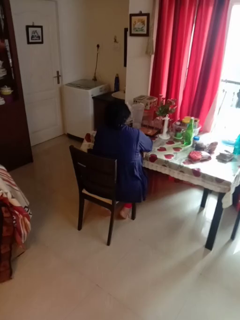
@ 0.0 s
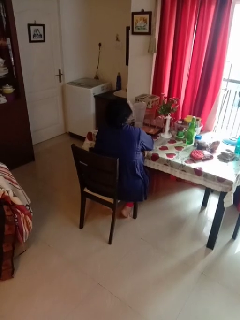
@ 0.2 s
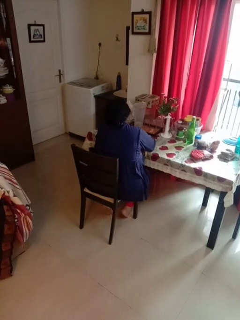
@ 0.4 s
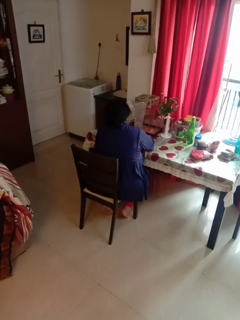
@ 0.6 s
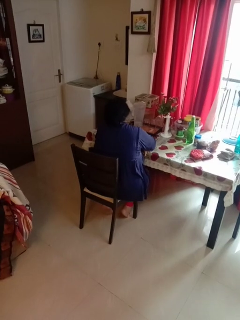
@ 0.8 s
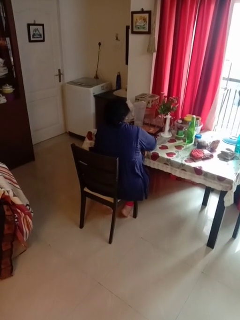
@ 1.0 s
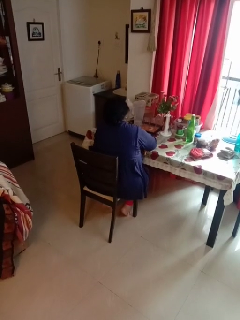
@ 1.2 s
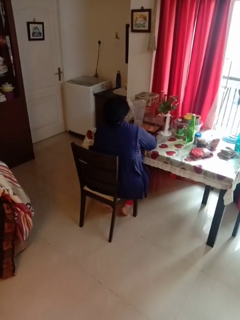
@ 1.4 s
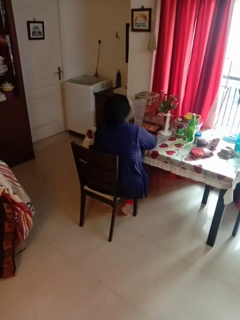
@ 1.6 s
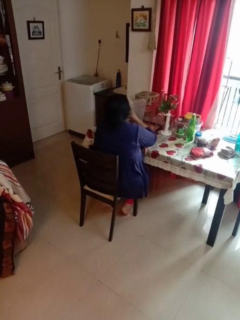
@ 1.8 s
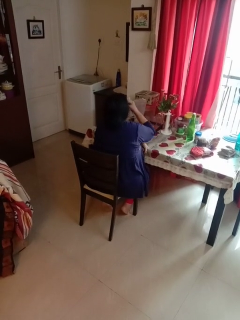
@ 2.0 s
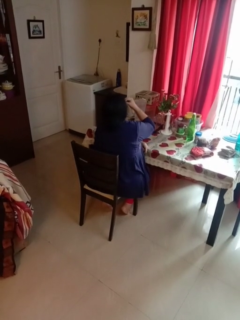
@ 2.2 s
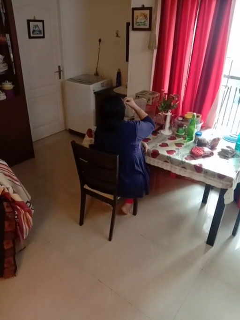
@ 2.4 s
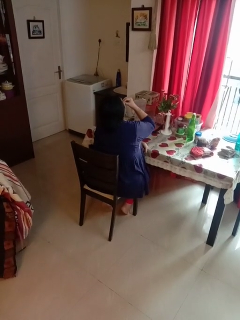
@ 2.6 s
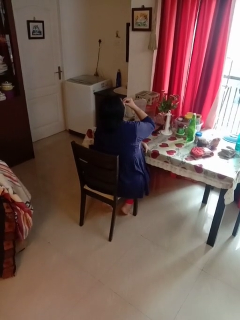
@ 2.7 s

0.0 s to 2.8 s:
person eats with hands

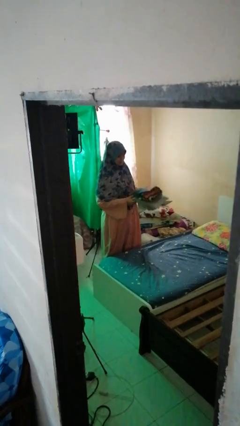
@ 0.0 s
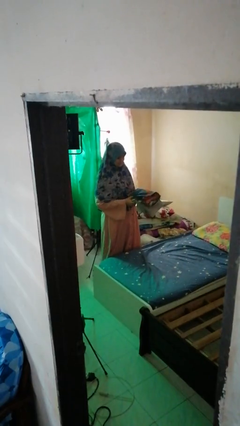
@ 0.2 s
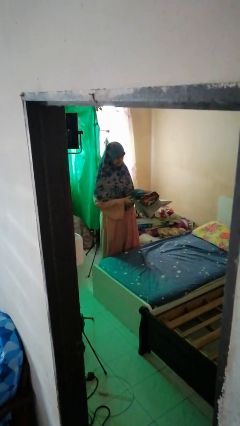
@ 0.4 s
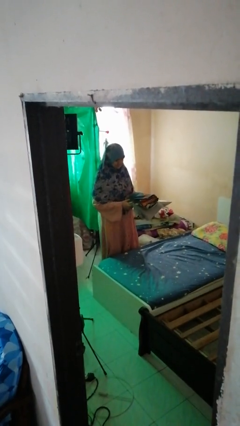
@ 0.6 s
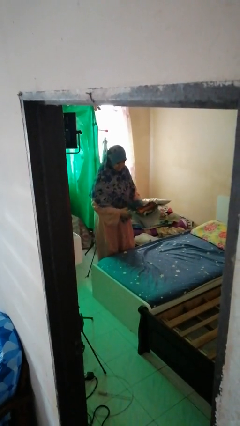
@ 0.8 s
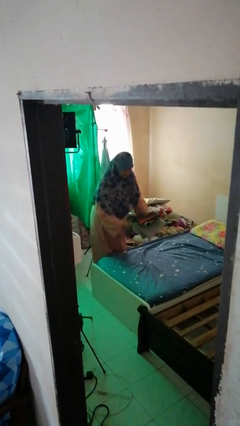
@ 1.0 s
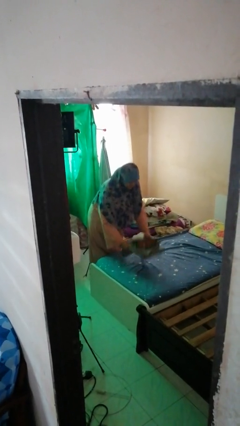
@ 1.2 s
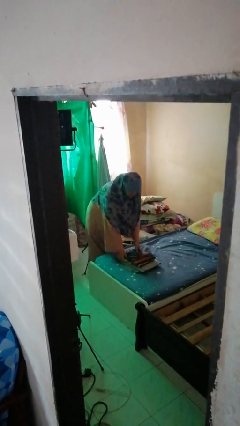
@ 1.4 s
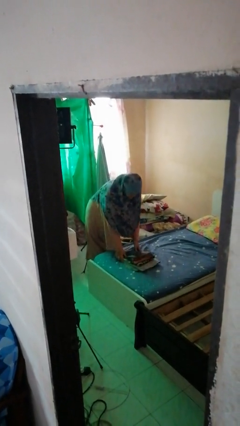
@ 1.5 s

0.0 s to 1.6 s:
person puts down object on bed

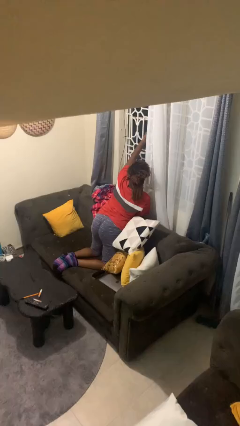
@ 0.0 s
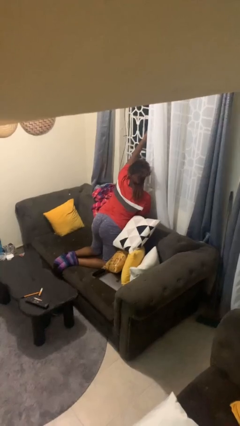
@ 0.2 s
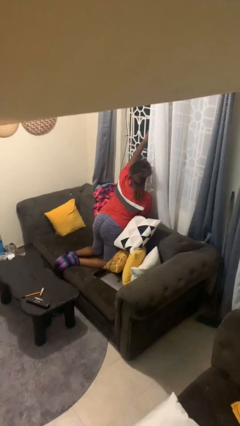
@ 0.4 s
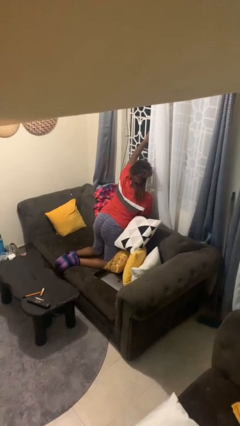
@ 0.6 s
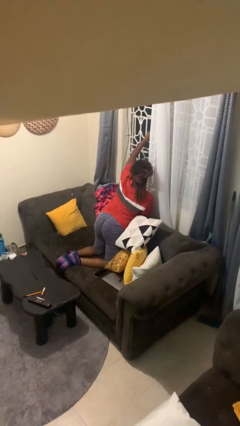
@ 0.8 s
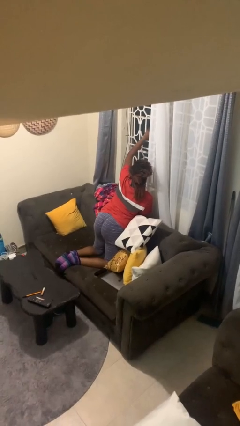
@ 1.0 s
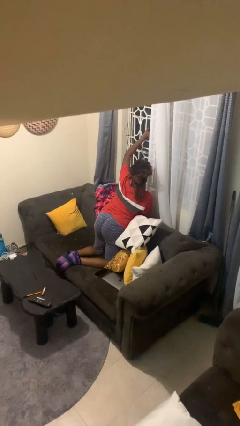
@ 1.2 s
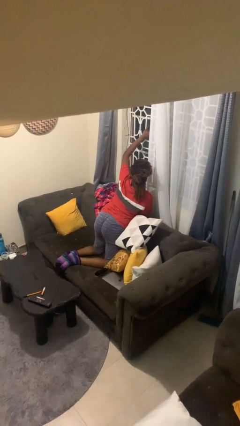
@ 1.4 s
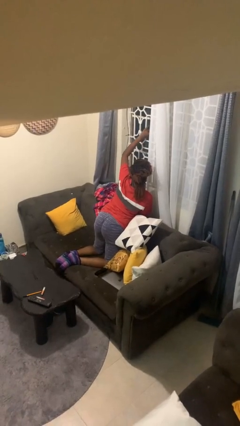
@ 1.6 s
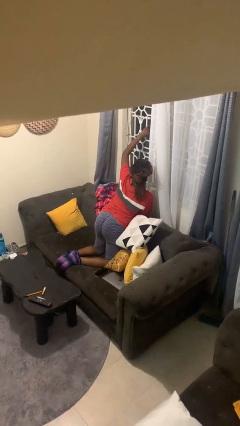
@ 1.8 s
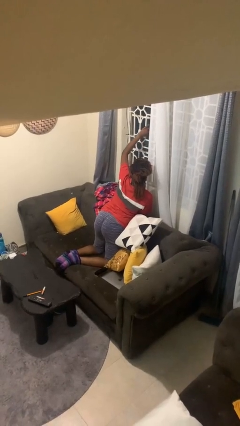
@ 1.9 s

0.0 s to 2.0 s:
person closes home window

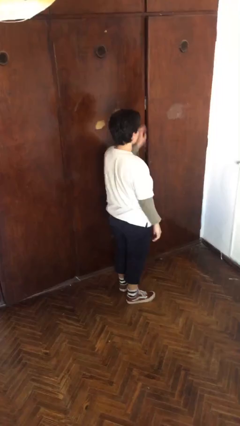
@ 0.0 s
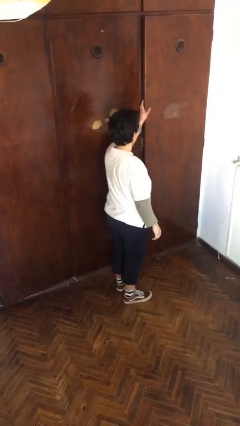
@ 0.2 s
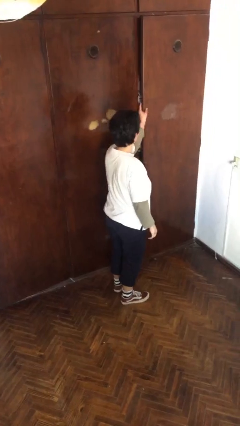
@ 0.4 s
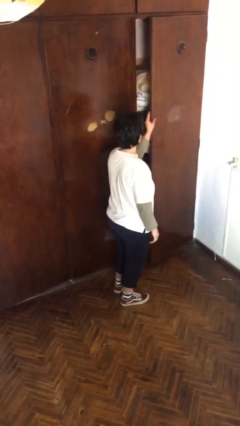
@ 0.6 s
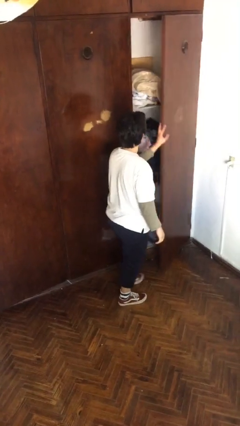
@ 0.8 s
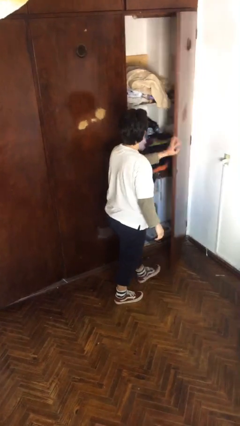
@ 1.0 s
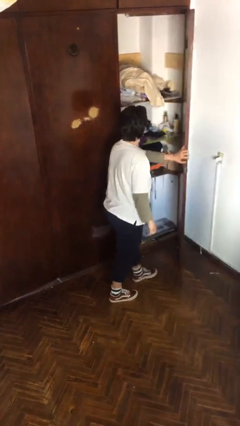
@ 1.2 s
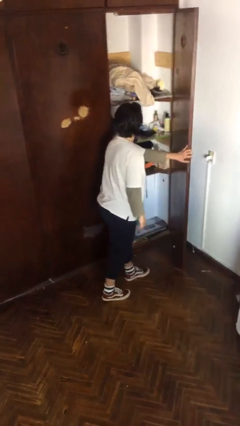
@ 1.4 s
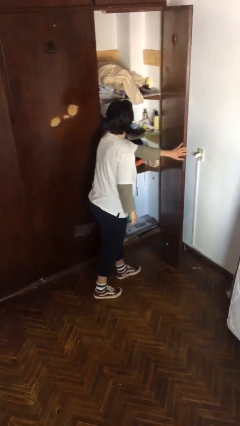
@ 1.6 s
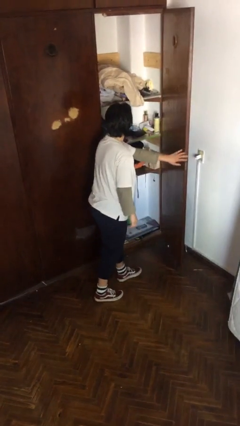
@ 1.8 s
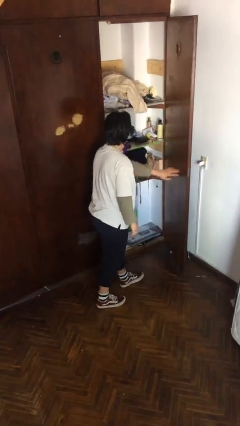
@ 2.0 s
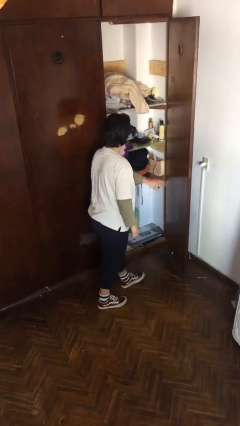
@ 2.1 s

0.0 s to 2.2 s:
person opens closet door

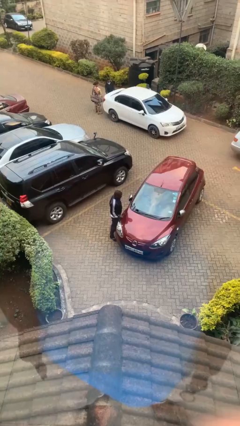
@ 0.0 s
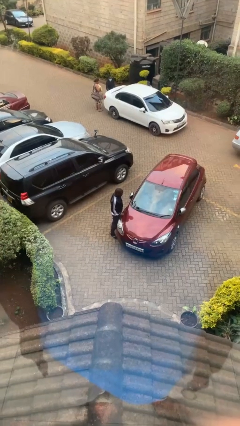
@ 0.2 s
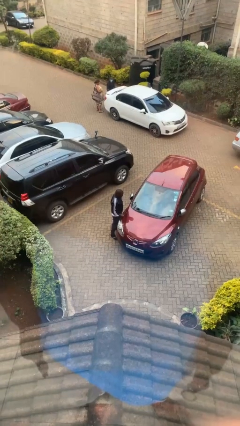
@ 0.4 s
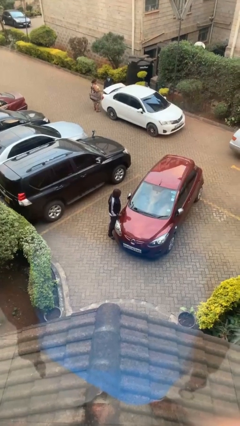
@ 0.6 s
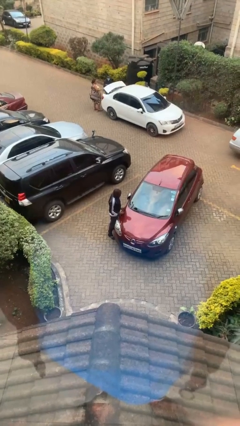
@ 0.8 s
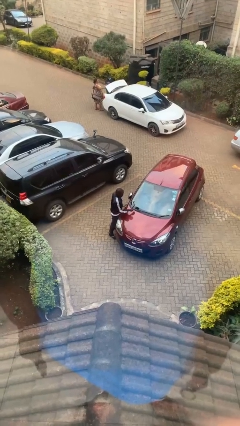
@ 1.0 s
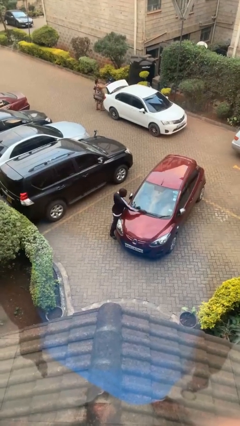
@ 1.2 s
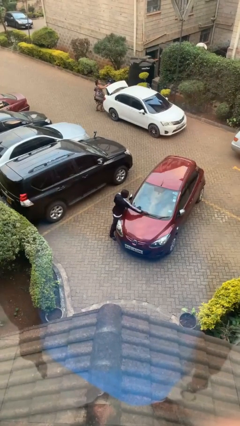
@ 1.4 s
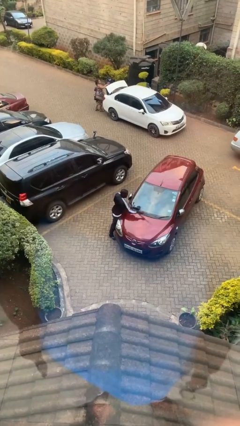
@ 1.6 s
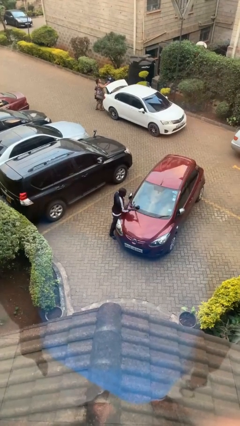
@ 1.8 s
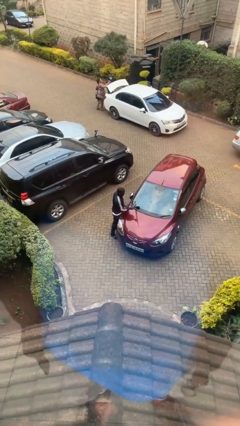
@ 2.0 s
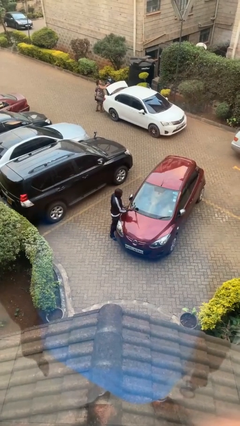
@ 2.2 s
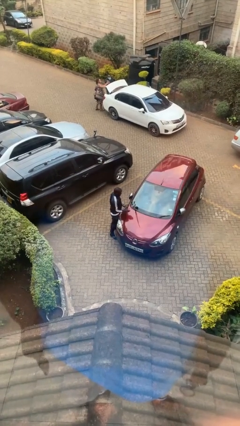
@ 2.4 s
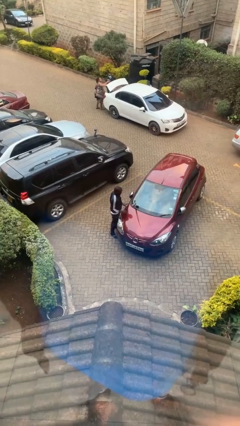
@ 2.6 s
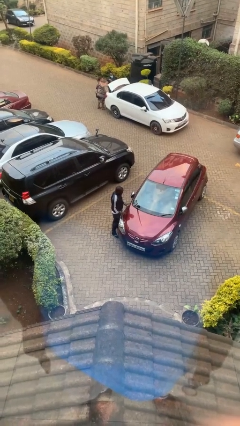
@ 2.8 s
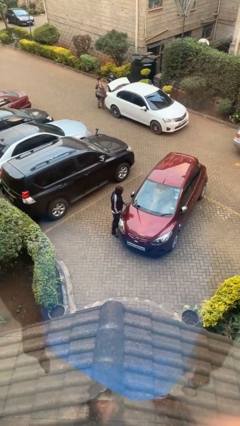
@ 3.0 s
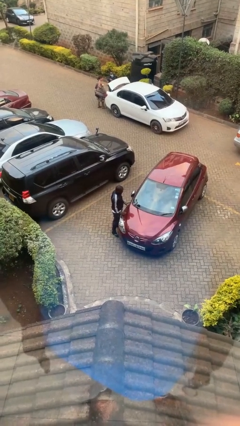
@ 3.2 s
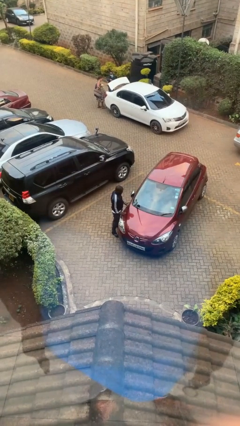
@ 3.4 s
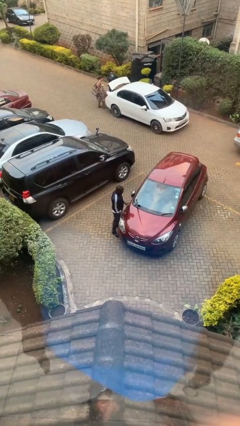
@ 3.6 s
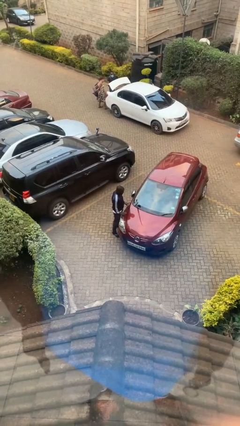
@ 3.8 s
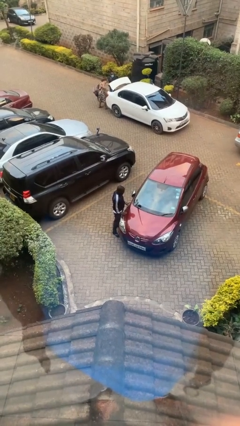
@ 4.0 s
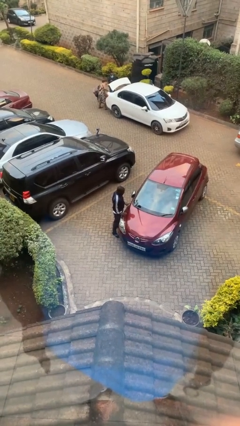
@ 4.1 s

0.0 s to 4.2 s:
person flips up car wipers

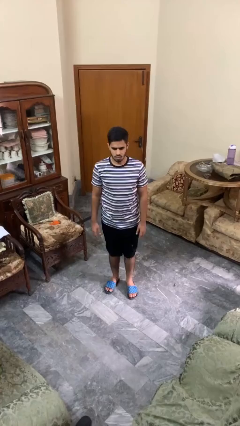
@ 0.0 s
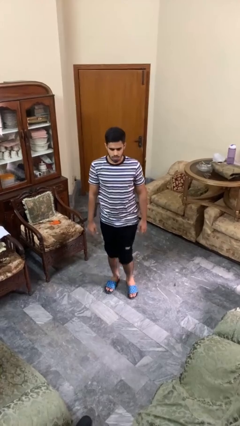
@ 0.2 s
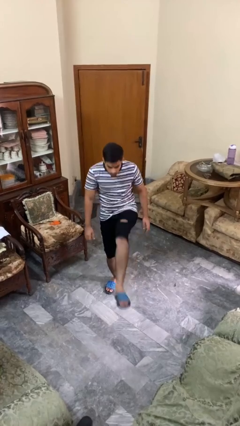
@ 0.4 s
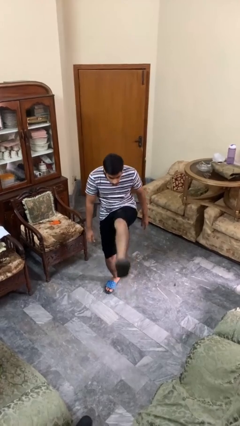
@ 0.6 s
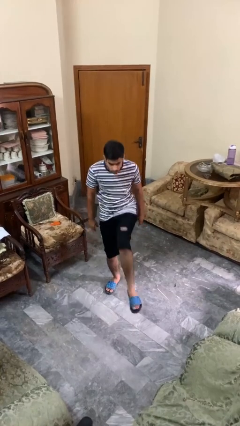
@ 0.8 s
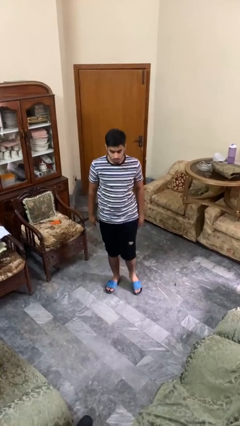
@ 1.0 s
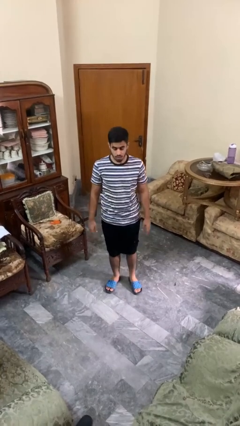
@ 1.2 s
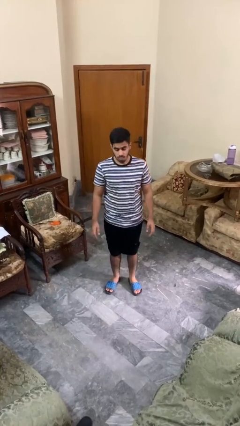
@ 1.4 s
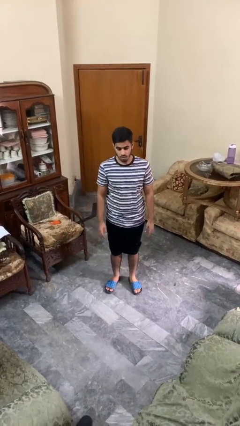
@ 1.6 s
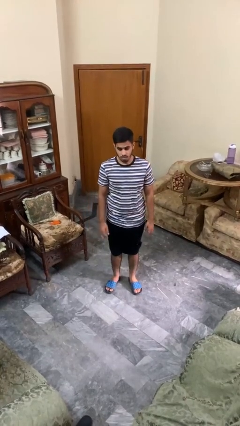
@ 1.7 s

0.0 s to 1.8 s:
person karate kicks

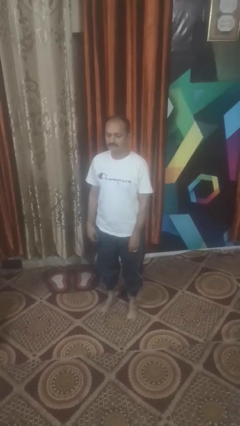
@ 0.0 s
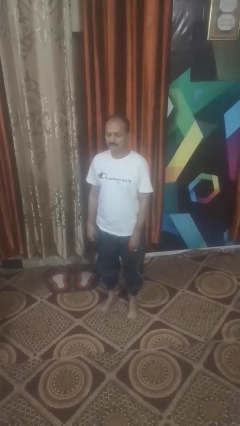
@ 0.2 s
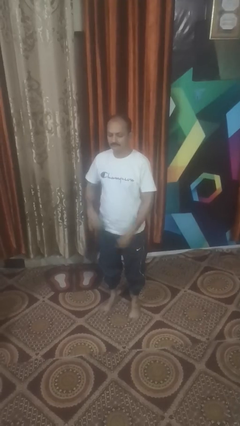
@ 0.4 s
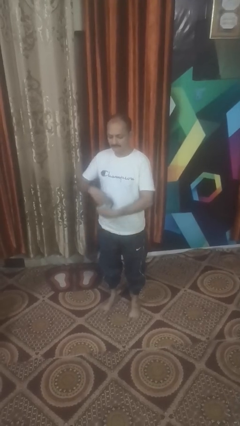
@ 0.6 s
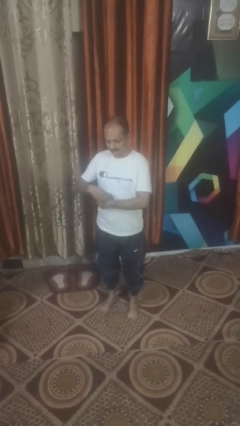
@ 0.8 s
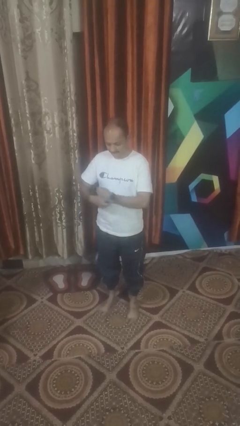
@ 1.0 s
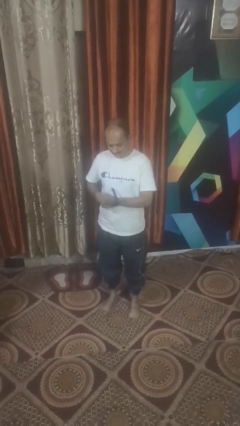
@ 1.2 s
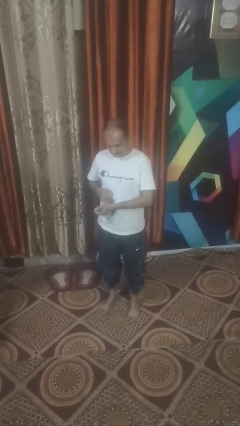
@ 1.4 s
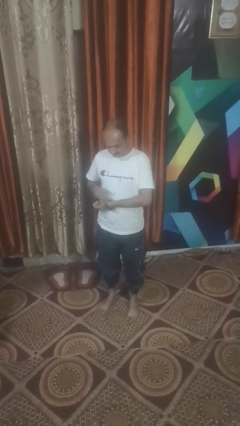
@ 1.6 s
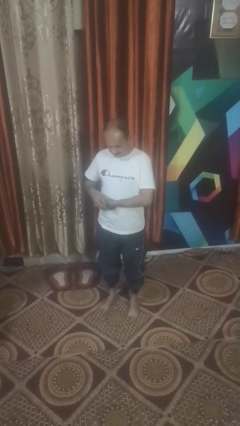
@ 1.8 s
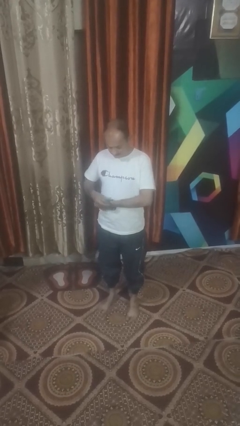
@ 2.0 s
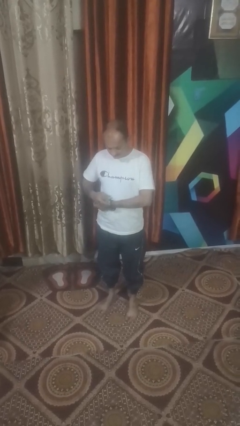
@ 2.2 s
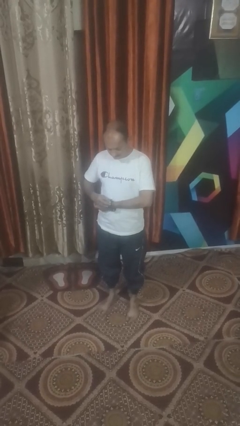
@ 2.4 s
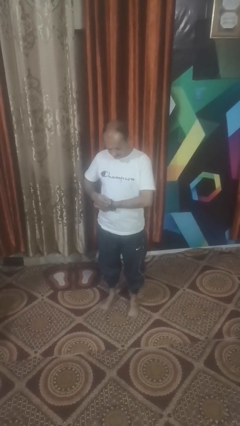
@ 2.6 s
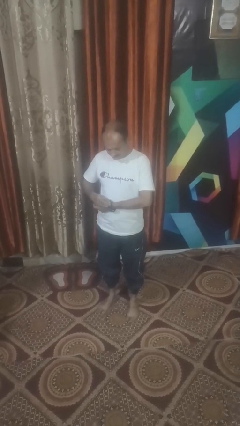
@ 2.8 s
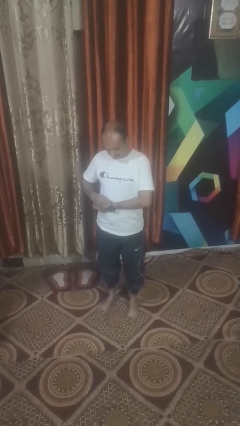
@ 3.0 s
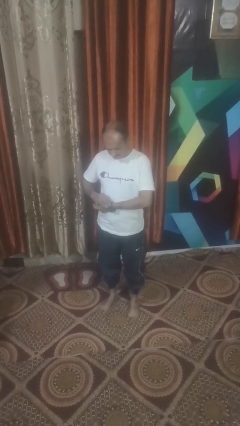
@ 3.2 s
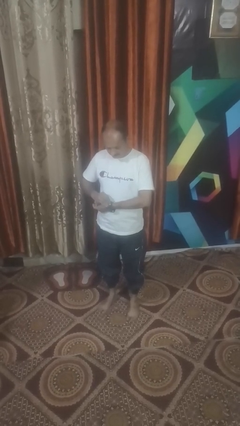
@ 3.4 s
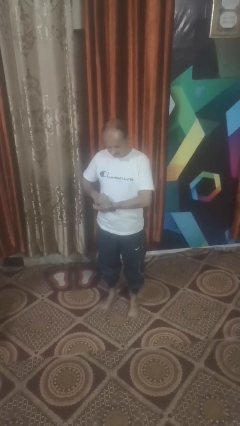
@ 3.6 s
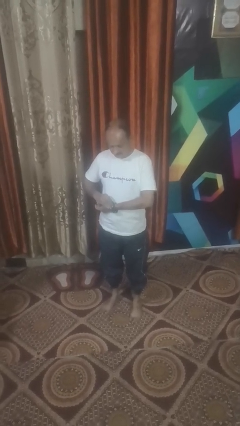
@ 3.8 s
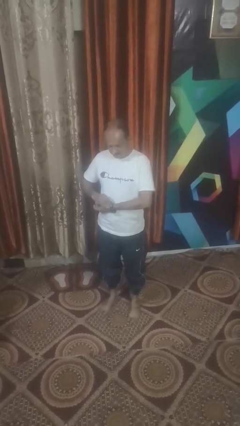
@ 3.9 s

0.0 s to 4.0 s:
person puts on wristwatch
